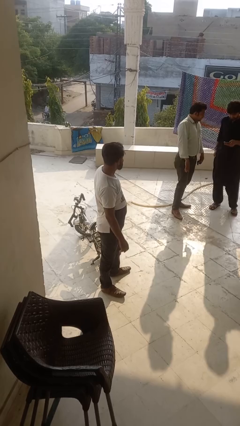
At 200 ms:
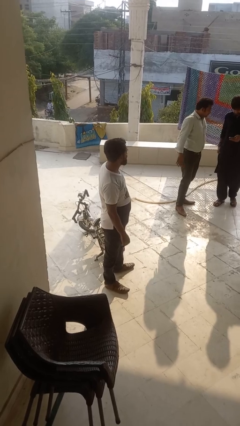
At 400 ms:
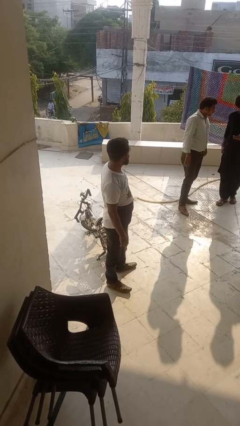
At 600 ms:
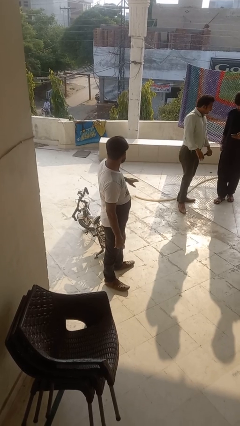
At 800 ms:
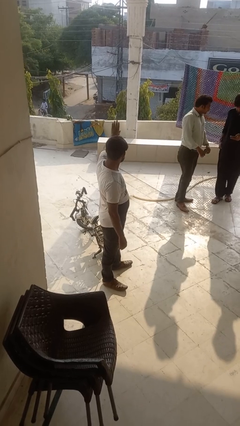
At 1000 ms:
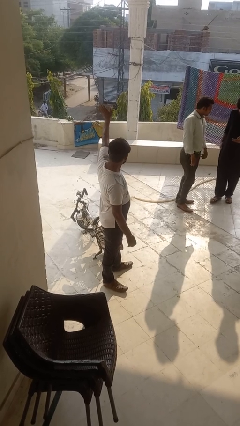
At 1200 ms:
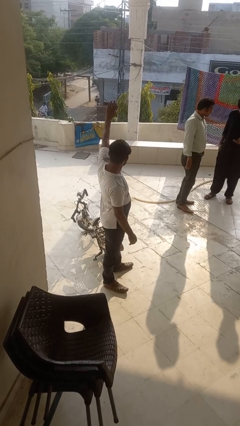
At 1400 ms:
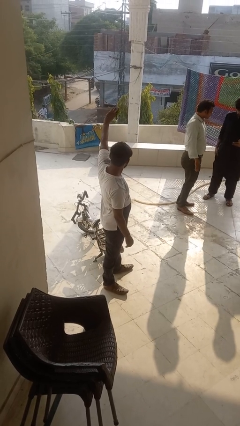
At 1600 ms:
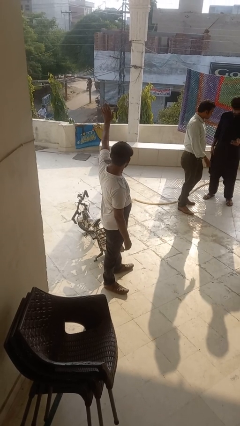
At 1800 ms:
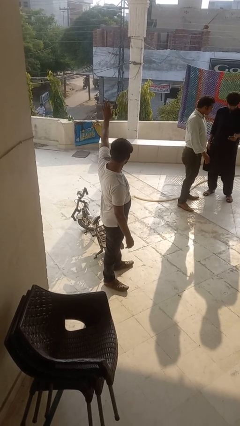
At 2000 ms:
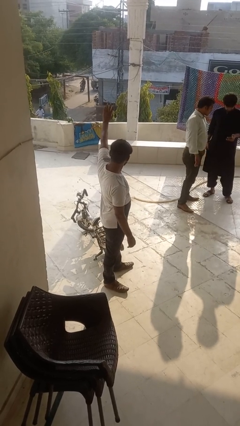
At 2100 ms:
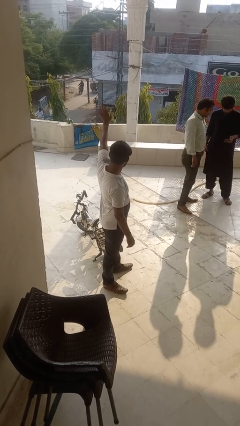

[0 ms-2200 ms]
person waves at person

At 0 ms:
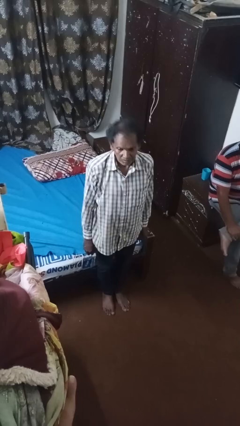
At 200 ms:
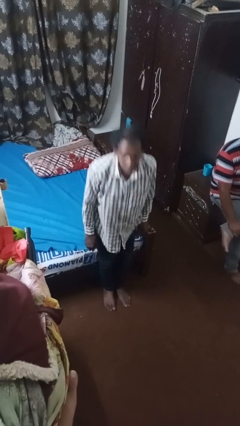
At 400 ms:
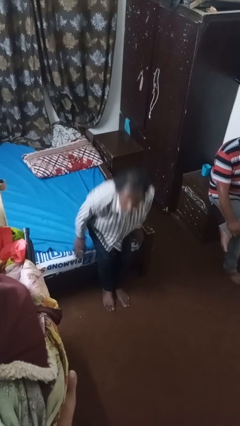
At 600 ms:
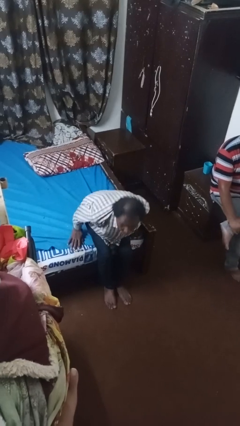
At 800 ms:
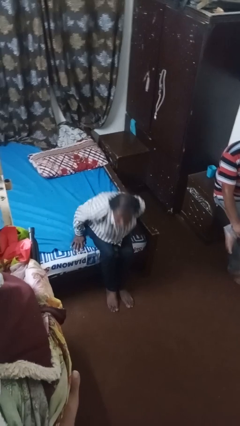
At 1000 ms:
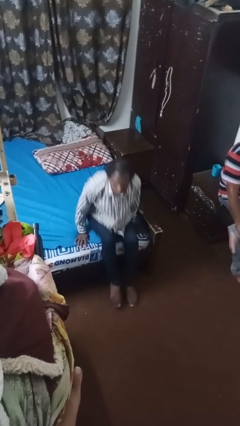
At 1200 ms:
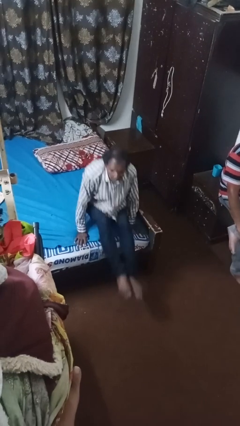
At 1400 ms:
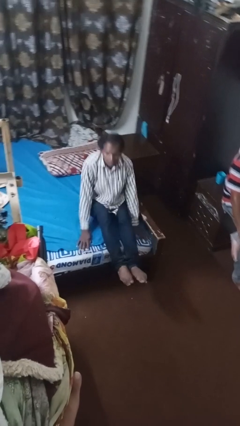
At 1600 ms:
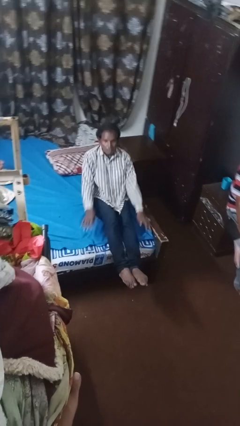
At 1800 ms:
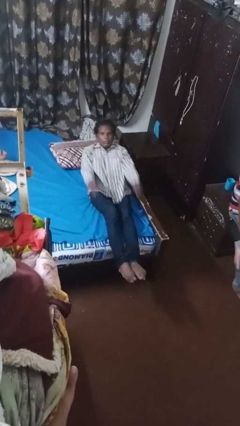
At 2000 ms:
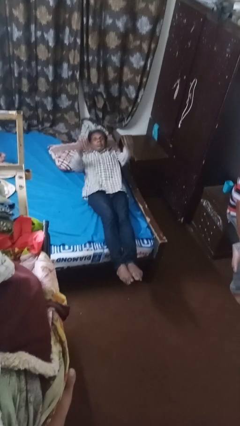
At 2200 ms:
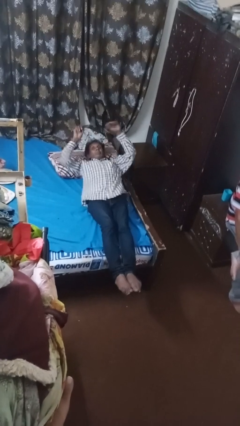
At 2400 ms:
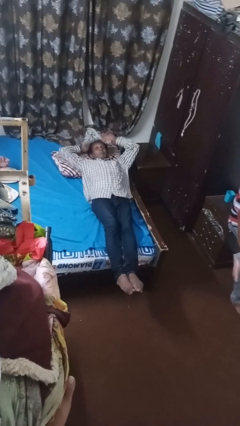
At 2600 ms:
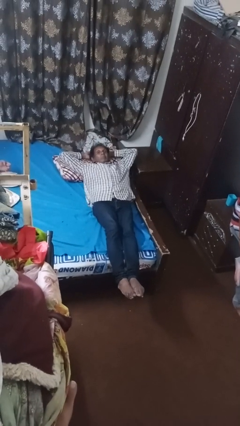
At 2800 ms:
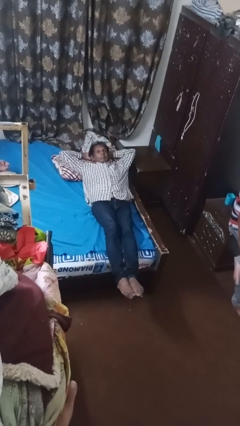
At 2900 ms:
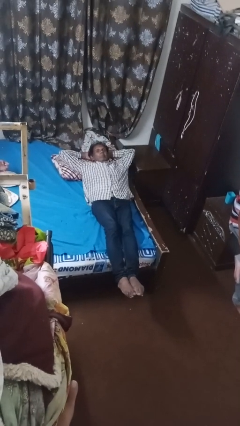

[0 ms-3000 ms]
person lies down on bed

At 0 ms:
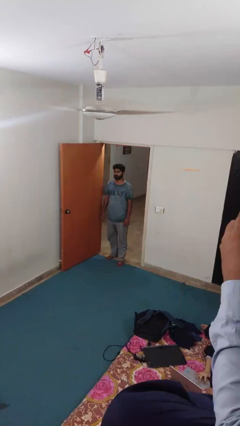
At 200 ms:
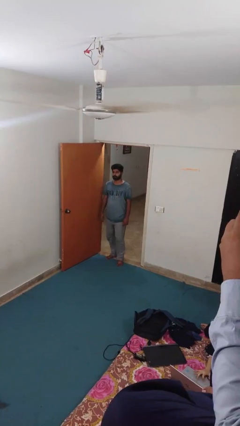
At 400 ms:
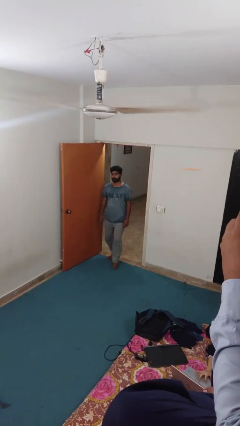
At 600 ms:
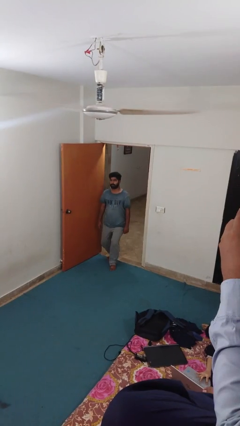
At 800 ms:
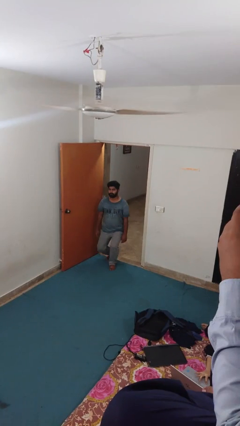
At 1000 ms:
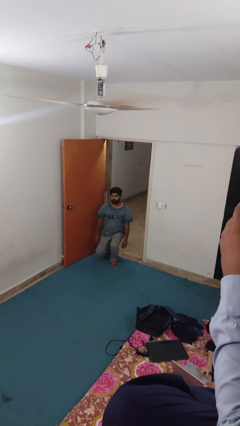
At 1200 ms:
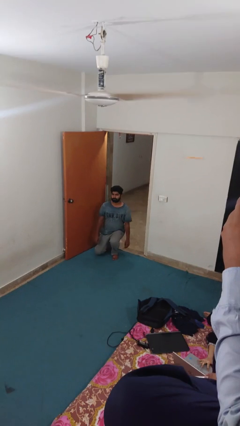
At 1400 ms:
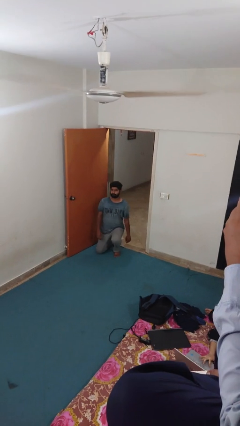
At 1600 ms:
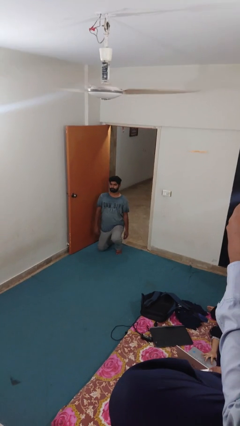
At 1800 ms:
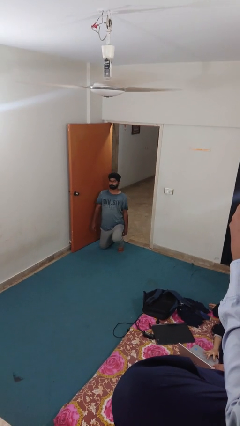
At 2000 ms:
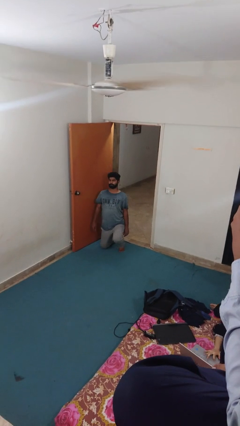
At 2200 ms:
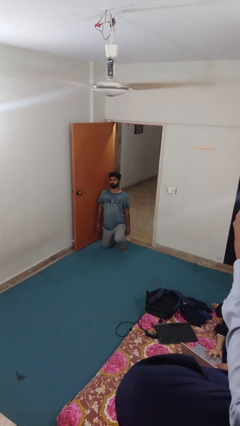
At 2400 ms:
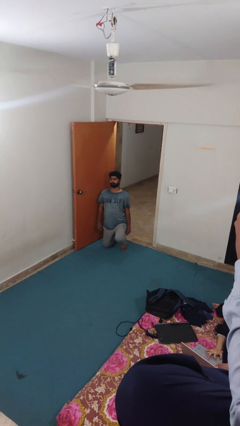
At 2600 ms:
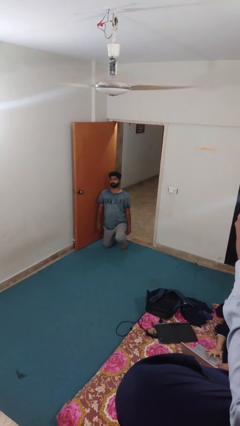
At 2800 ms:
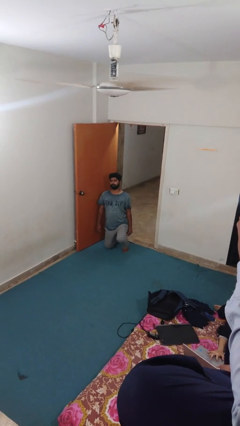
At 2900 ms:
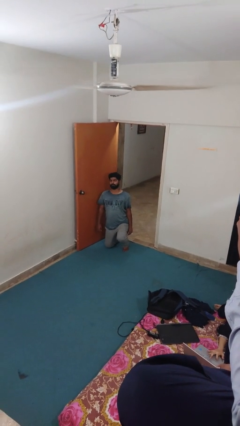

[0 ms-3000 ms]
person kneels

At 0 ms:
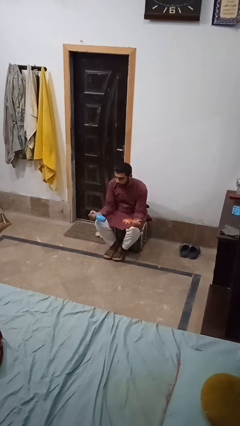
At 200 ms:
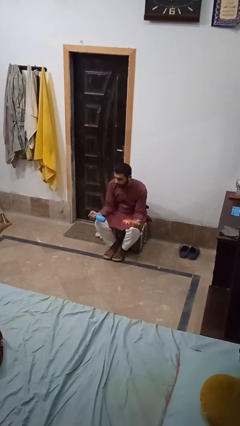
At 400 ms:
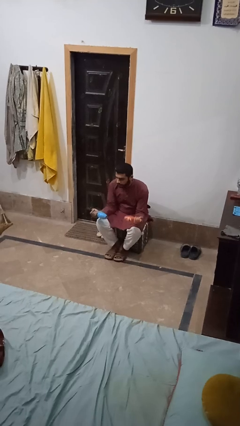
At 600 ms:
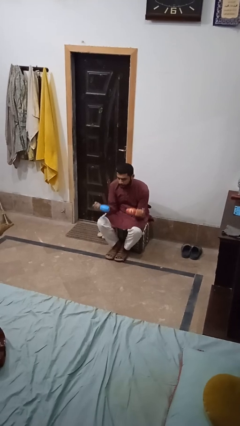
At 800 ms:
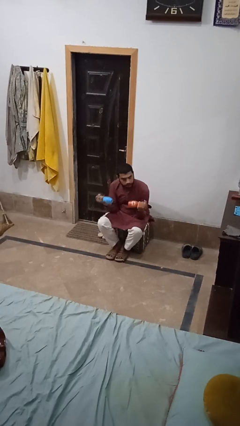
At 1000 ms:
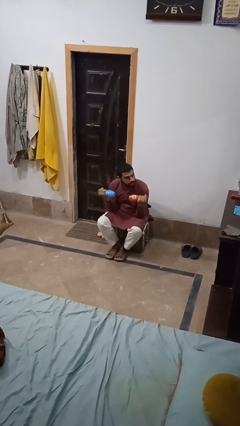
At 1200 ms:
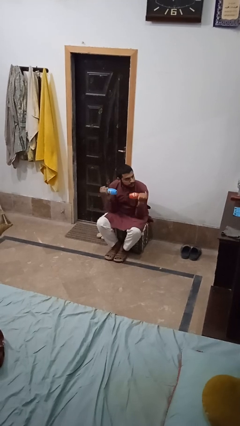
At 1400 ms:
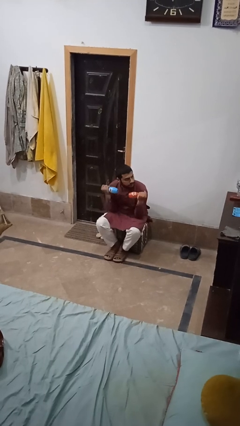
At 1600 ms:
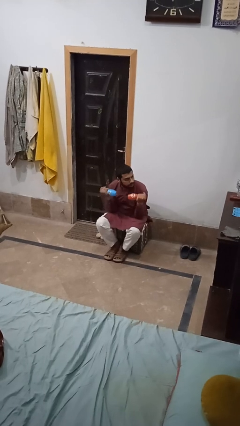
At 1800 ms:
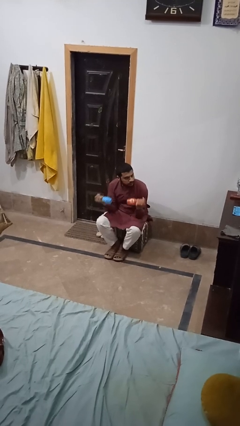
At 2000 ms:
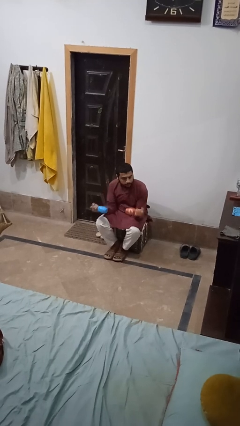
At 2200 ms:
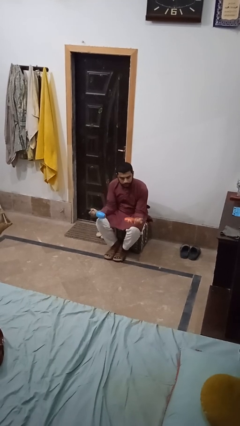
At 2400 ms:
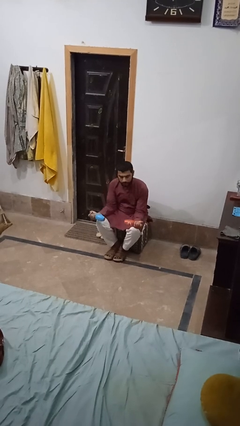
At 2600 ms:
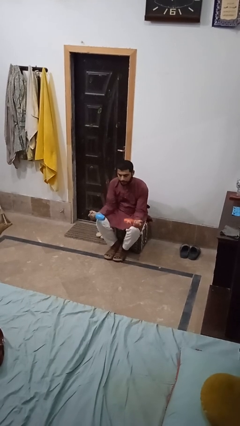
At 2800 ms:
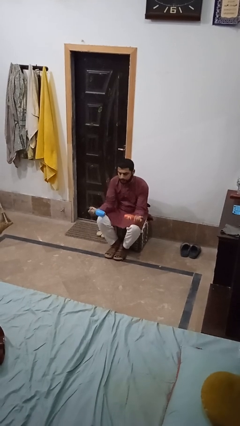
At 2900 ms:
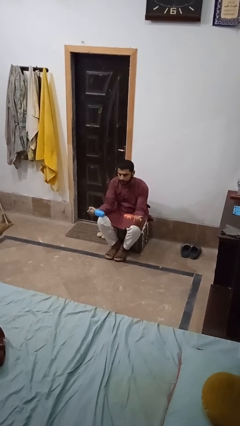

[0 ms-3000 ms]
person lifts dumbbells

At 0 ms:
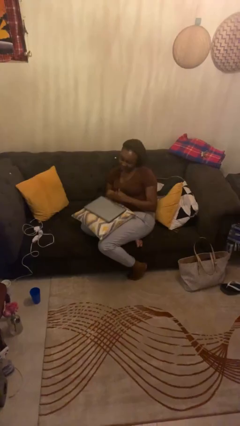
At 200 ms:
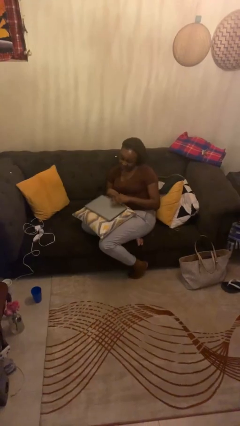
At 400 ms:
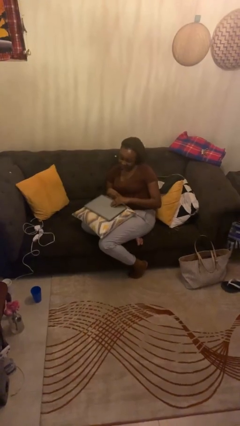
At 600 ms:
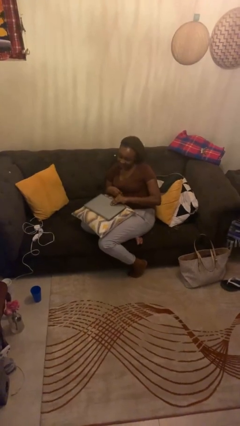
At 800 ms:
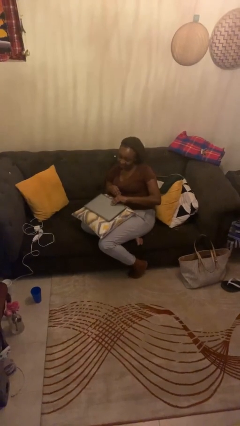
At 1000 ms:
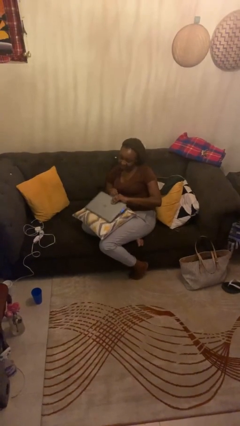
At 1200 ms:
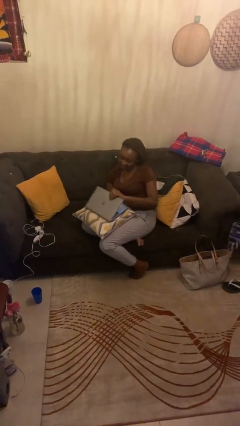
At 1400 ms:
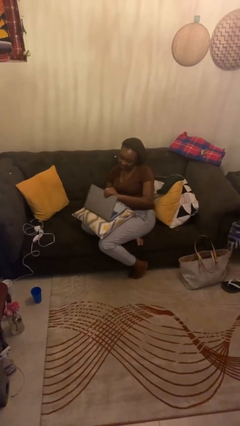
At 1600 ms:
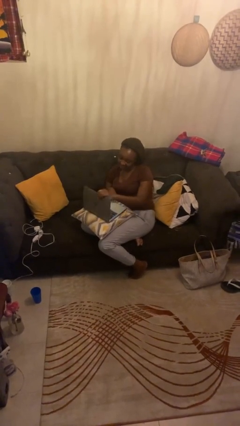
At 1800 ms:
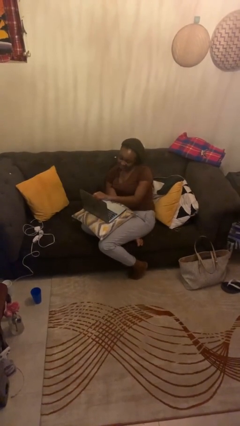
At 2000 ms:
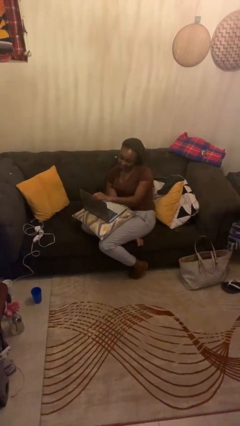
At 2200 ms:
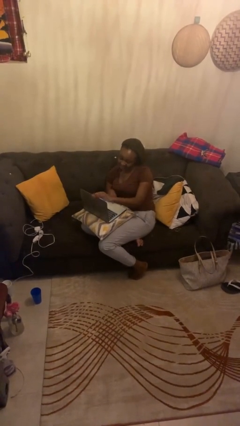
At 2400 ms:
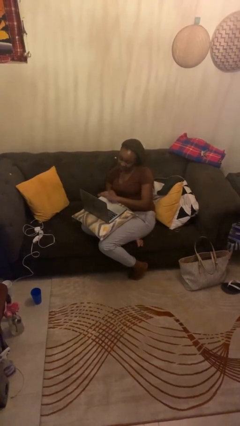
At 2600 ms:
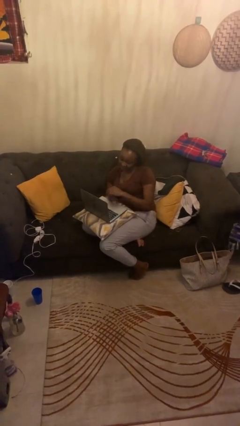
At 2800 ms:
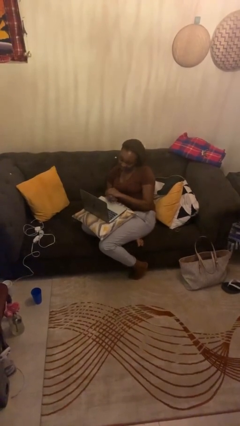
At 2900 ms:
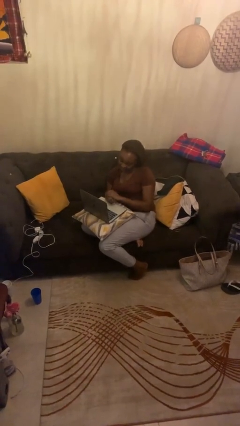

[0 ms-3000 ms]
person opens laptop

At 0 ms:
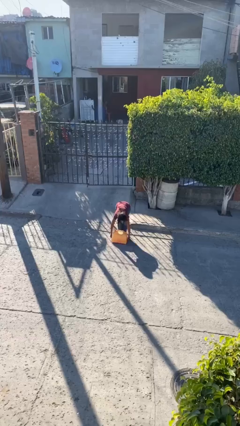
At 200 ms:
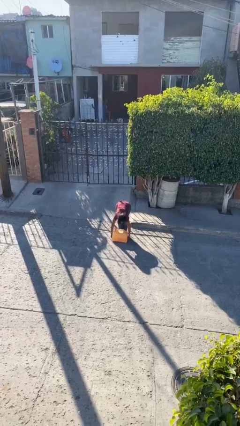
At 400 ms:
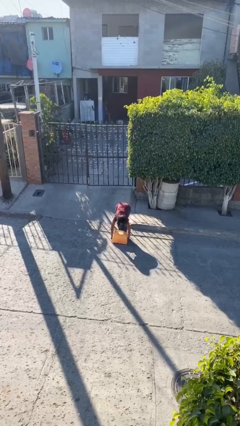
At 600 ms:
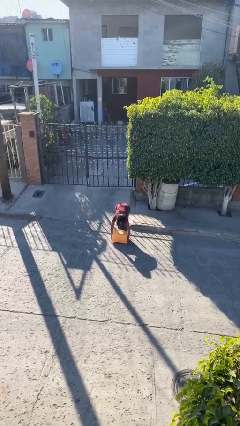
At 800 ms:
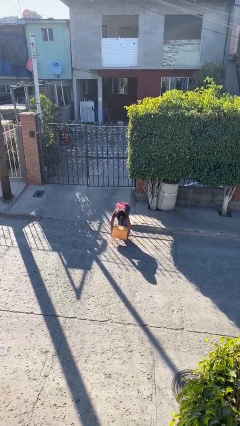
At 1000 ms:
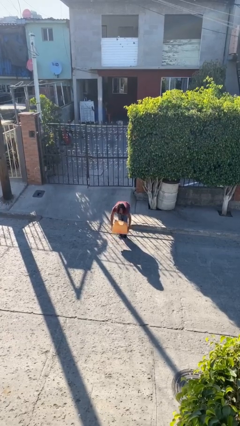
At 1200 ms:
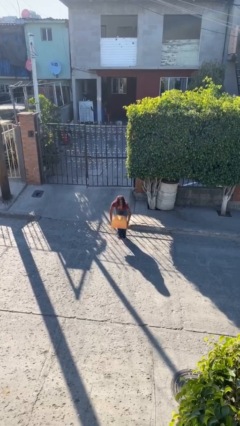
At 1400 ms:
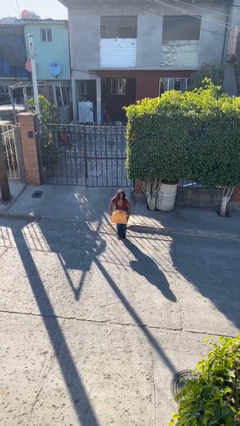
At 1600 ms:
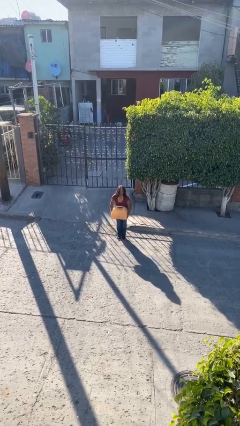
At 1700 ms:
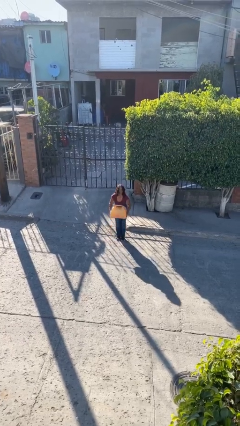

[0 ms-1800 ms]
person picks up object from floor

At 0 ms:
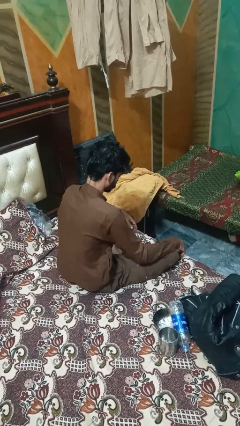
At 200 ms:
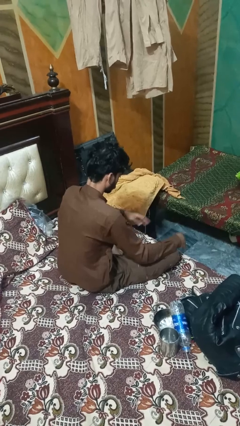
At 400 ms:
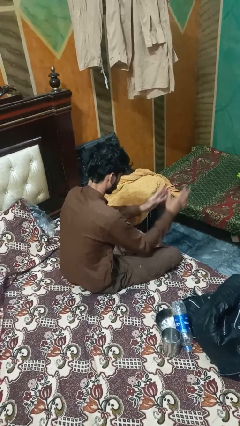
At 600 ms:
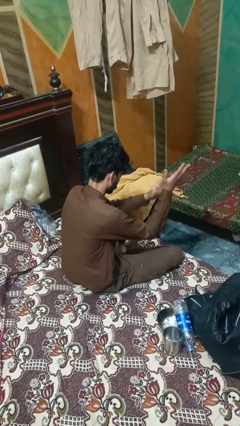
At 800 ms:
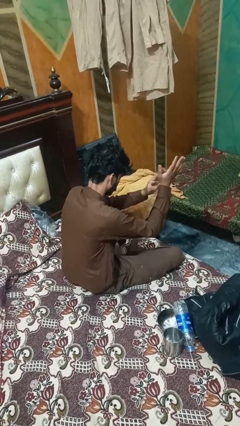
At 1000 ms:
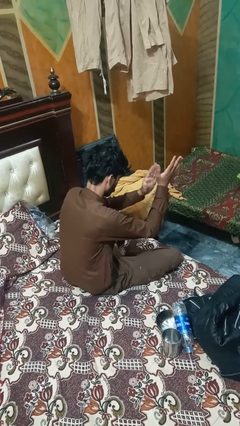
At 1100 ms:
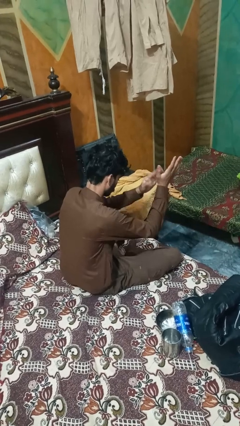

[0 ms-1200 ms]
person claps hands
